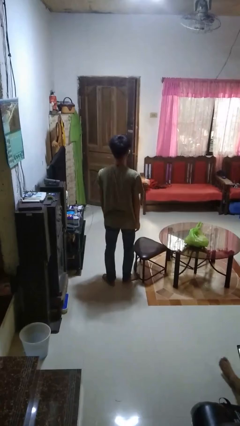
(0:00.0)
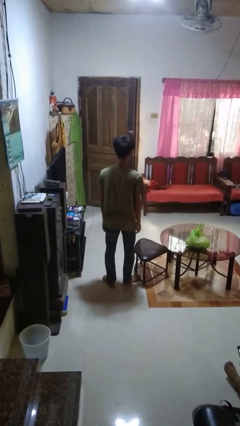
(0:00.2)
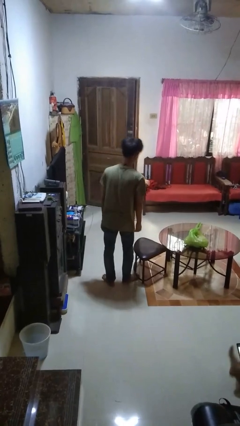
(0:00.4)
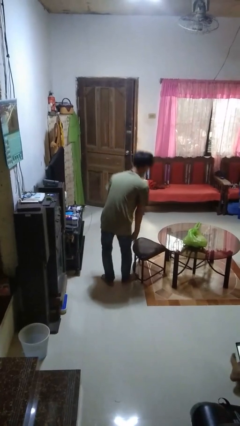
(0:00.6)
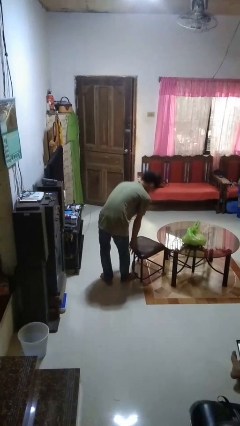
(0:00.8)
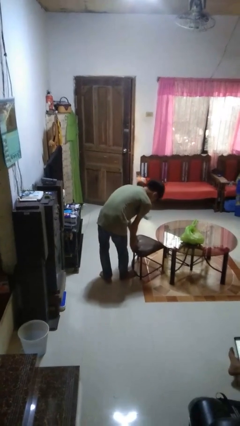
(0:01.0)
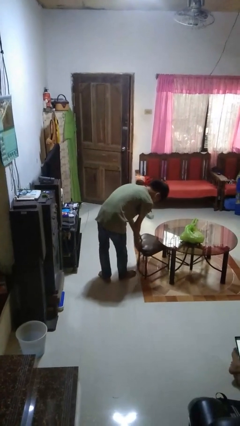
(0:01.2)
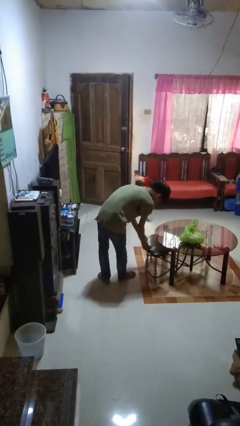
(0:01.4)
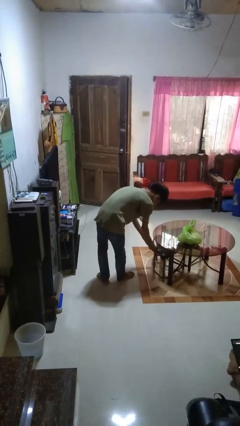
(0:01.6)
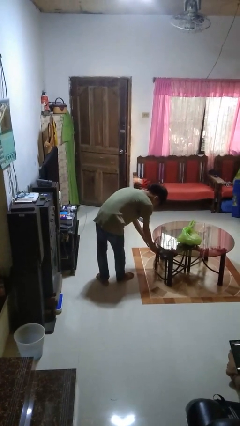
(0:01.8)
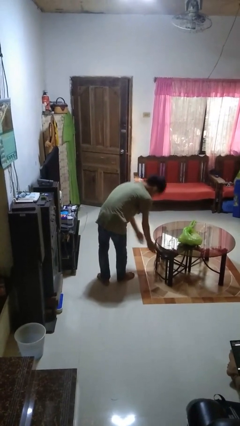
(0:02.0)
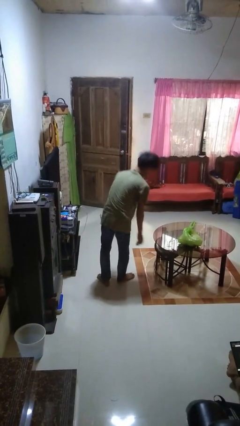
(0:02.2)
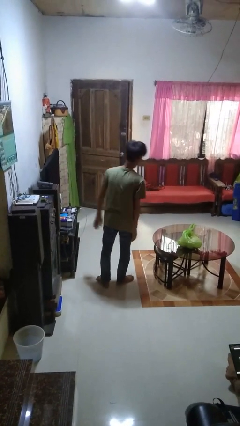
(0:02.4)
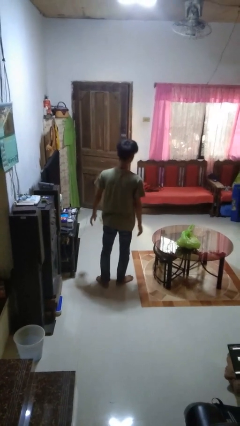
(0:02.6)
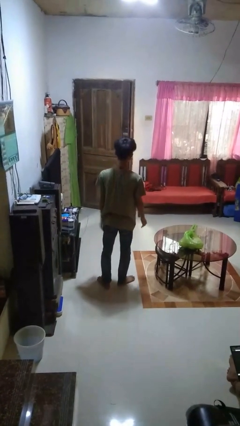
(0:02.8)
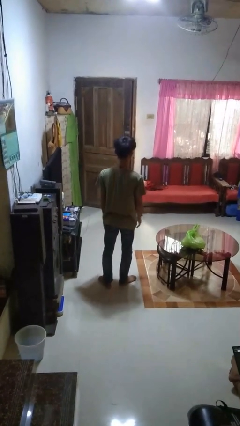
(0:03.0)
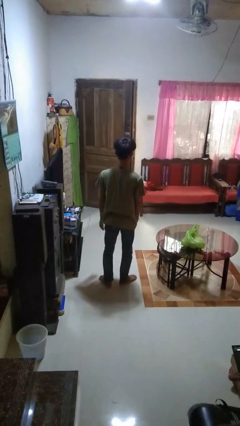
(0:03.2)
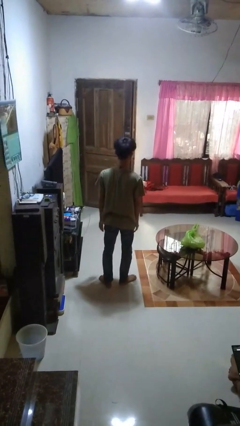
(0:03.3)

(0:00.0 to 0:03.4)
person pushes in chair

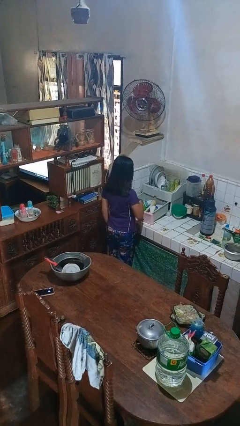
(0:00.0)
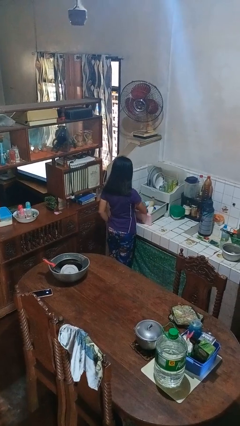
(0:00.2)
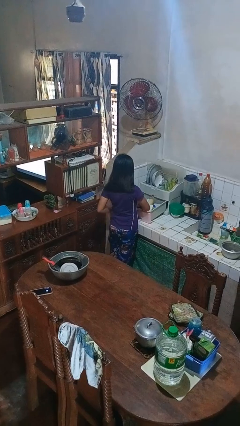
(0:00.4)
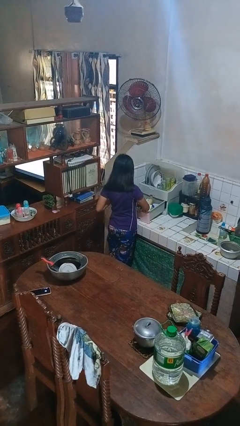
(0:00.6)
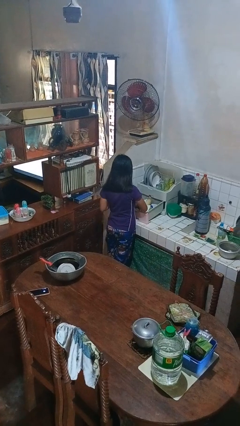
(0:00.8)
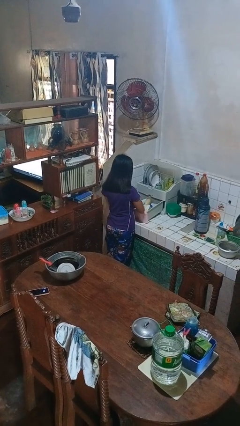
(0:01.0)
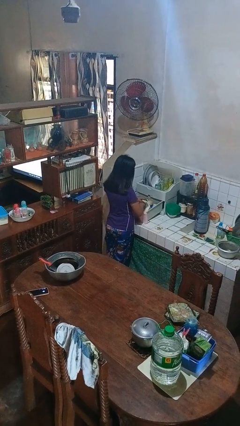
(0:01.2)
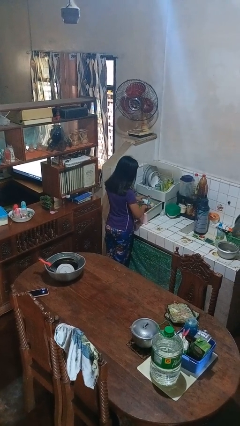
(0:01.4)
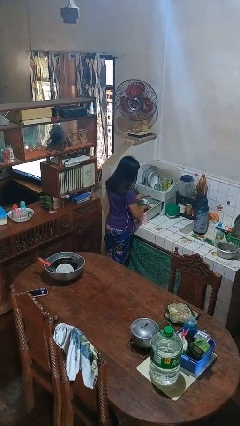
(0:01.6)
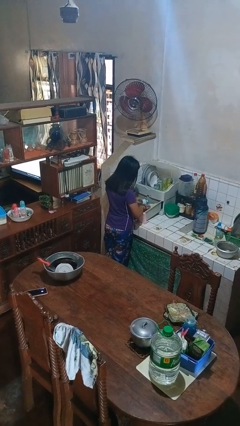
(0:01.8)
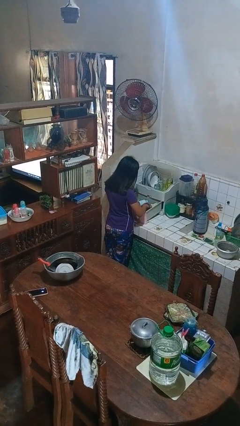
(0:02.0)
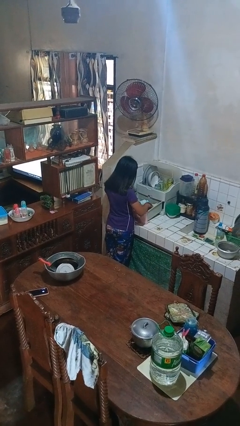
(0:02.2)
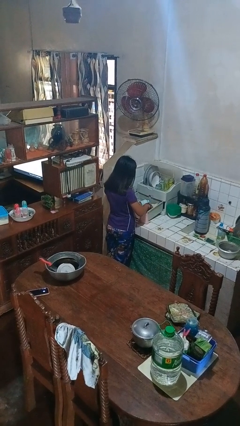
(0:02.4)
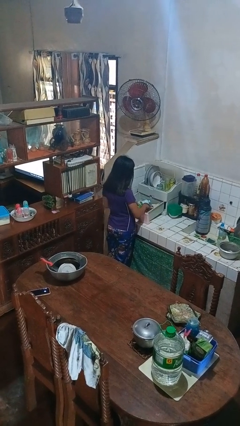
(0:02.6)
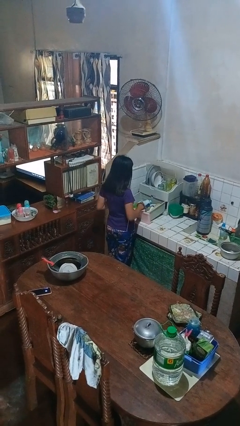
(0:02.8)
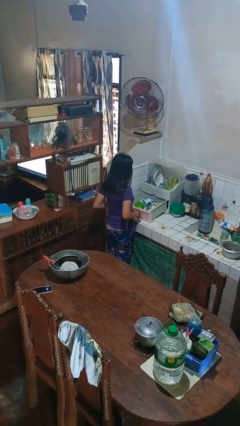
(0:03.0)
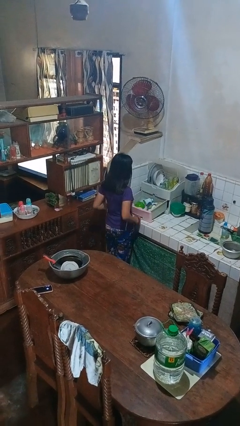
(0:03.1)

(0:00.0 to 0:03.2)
person searches in kitchen drawer

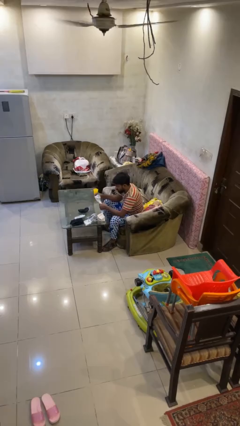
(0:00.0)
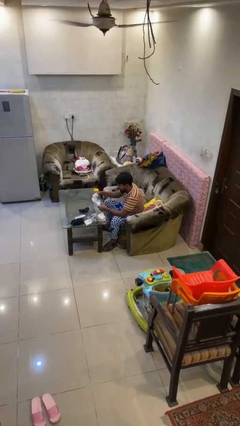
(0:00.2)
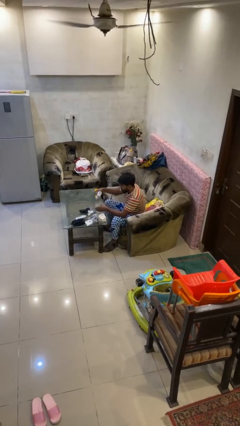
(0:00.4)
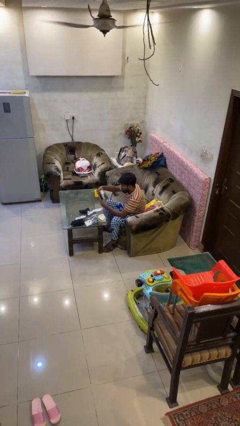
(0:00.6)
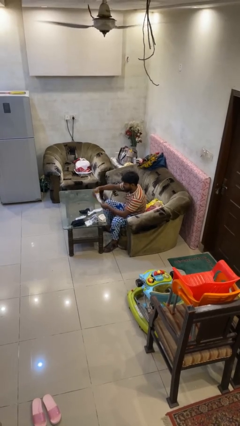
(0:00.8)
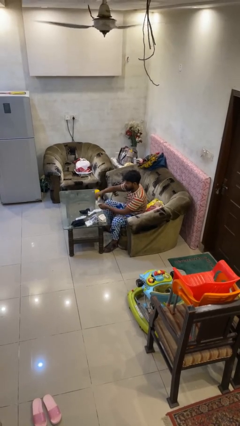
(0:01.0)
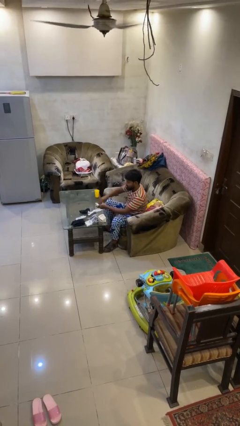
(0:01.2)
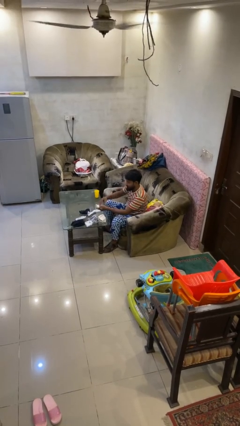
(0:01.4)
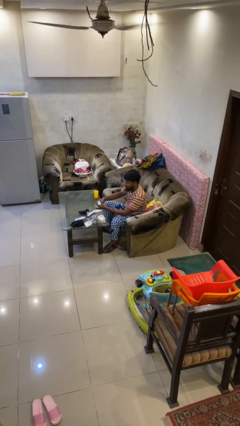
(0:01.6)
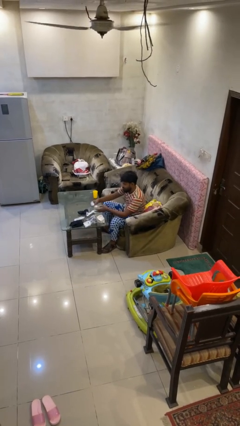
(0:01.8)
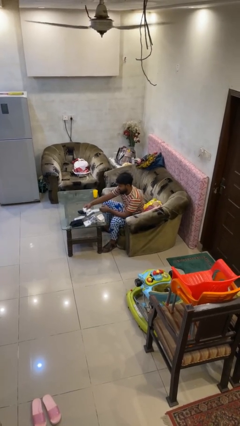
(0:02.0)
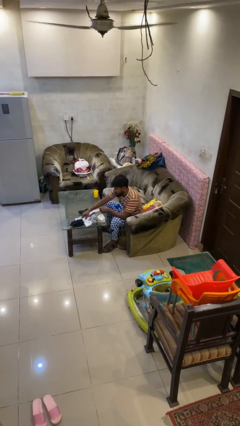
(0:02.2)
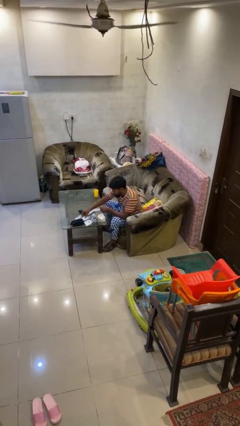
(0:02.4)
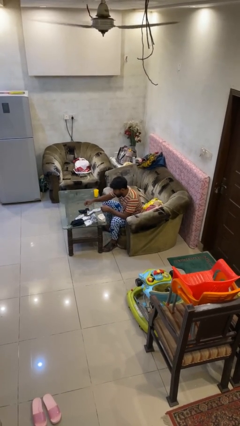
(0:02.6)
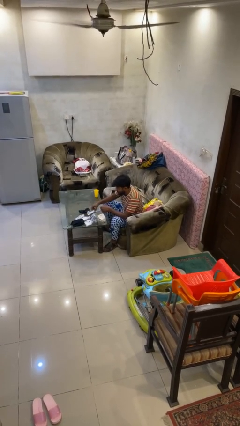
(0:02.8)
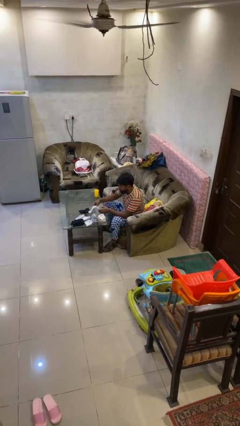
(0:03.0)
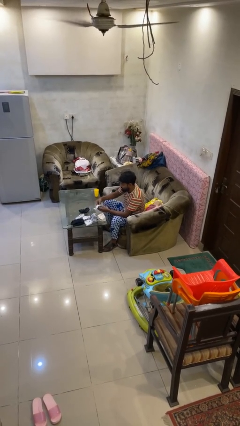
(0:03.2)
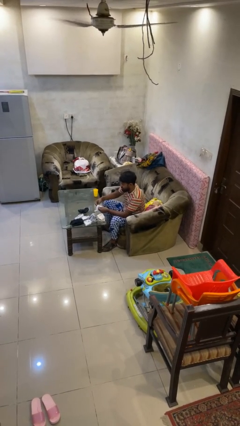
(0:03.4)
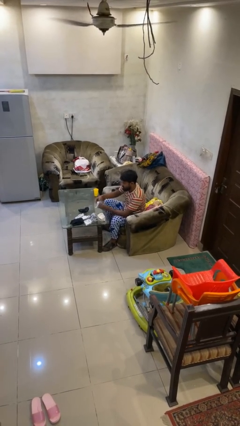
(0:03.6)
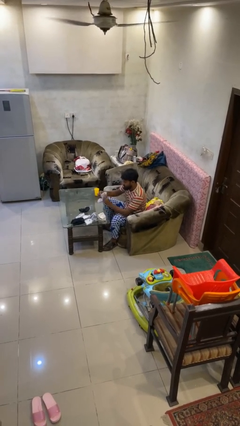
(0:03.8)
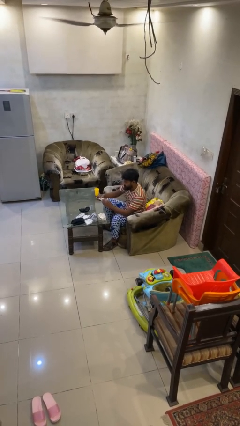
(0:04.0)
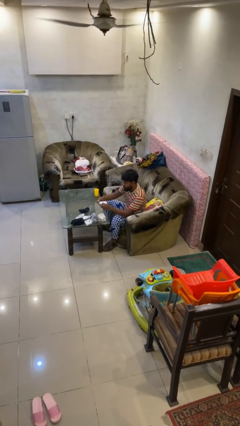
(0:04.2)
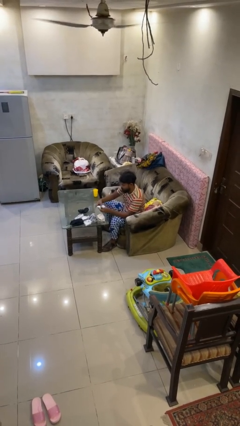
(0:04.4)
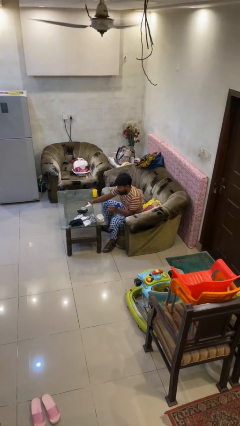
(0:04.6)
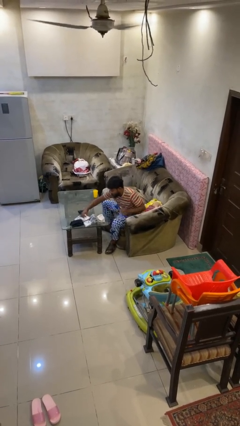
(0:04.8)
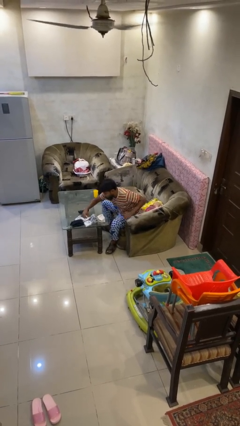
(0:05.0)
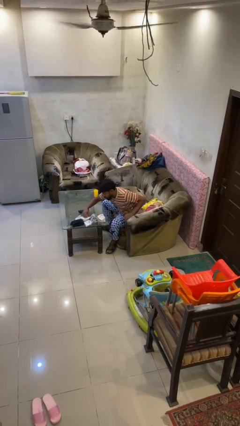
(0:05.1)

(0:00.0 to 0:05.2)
person folds socks

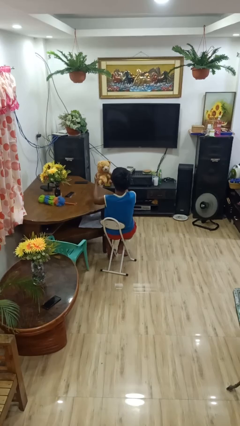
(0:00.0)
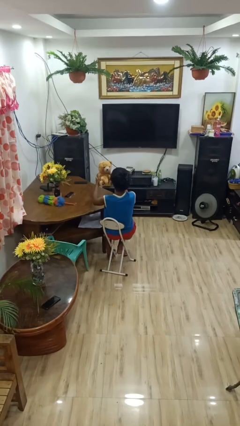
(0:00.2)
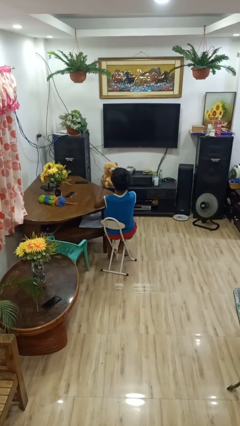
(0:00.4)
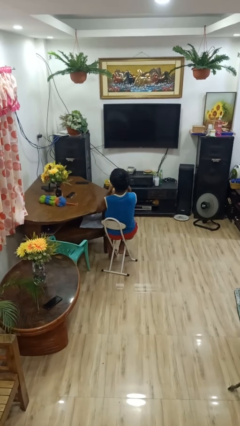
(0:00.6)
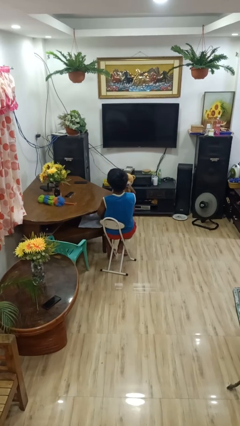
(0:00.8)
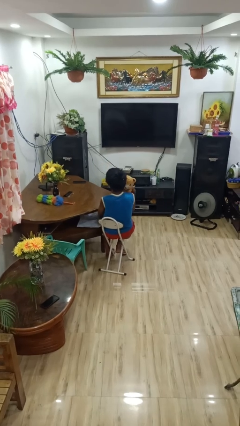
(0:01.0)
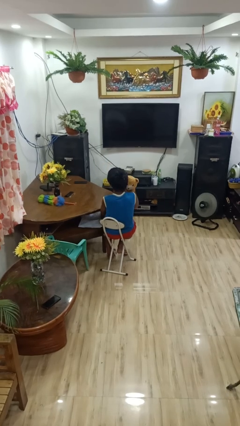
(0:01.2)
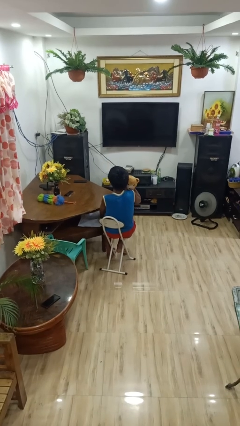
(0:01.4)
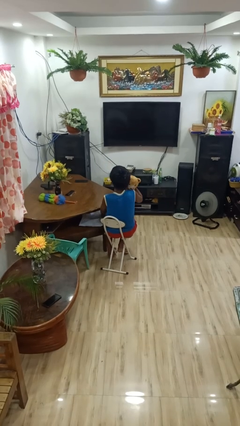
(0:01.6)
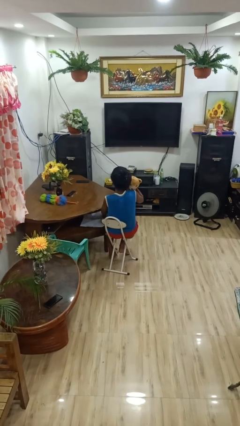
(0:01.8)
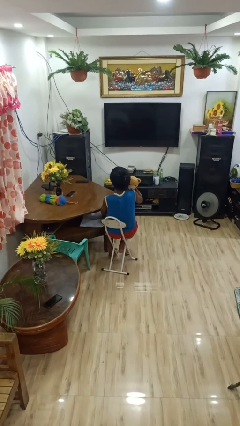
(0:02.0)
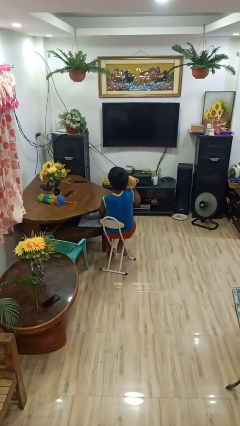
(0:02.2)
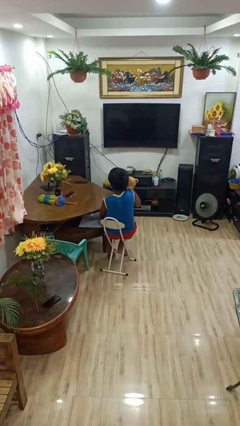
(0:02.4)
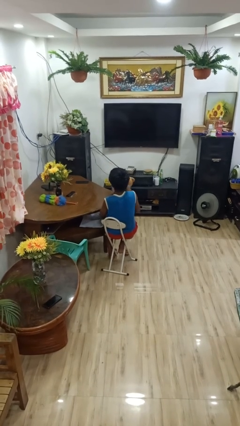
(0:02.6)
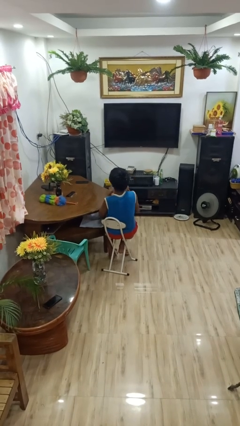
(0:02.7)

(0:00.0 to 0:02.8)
person hugs stuffed animal

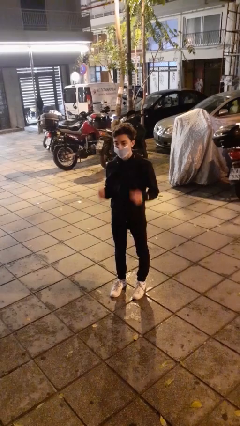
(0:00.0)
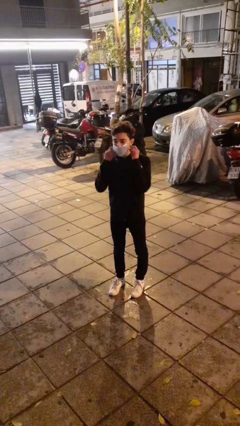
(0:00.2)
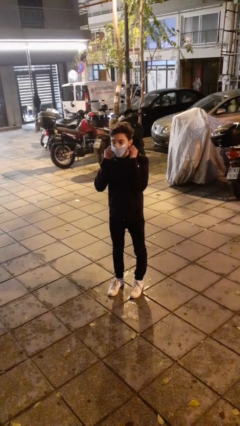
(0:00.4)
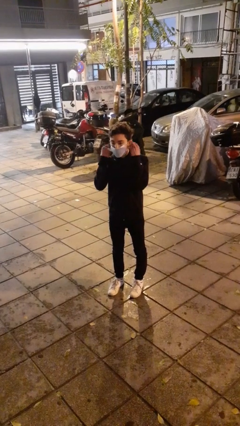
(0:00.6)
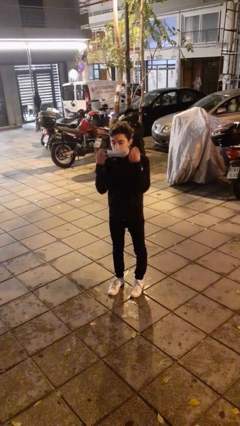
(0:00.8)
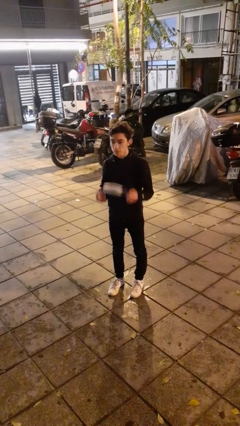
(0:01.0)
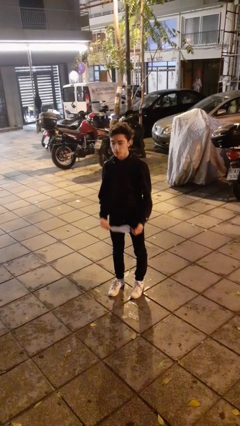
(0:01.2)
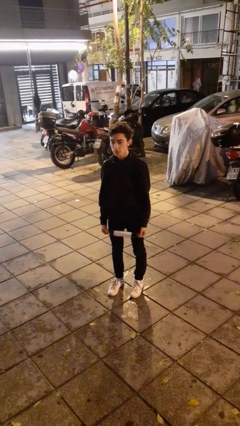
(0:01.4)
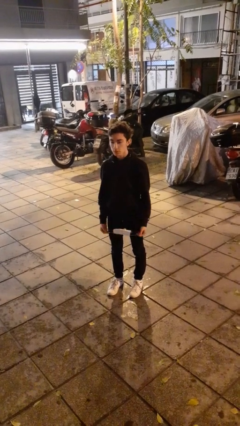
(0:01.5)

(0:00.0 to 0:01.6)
person takes off facemask

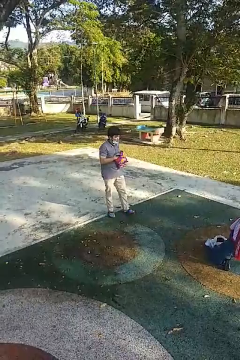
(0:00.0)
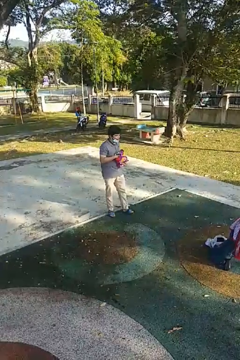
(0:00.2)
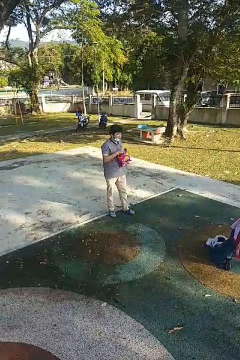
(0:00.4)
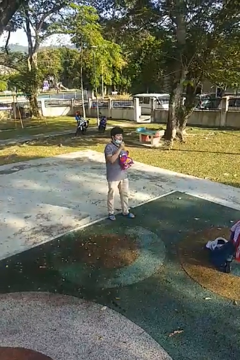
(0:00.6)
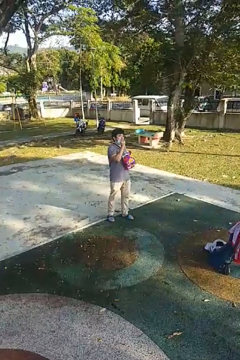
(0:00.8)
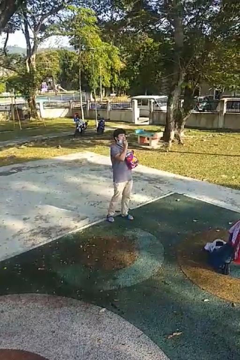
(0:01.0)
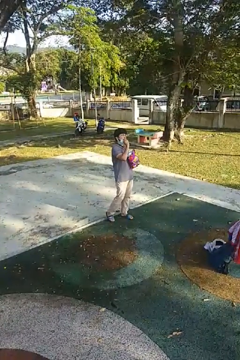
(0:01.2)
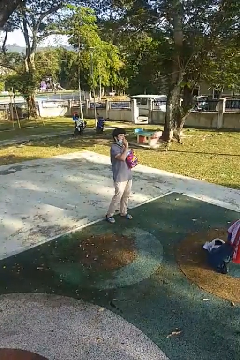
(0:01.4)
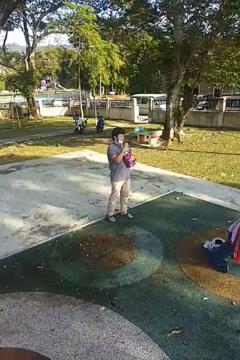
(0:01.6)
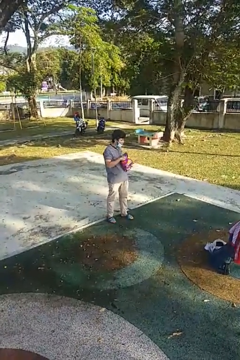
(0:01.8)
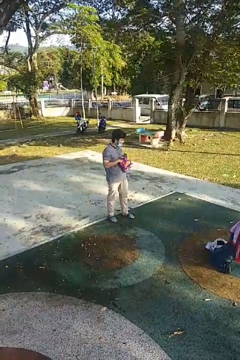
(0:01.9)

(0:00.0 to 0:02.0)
person eats snack from bag
